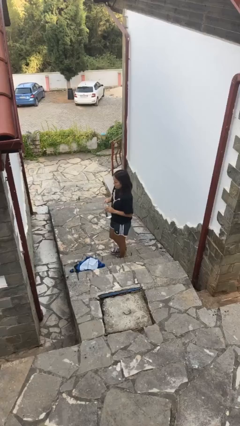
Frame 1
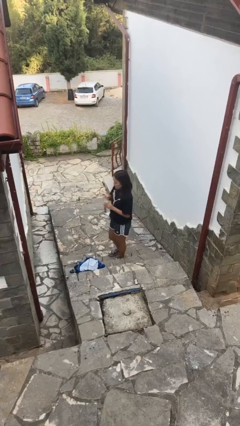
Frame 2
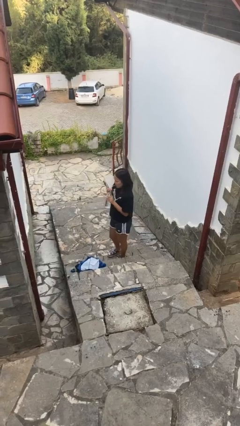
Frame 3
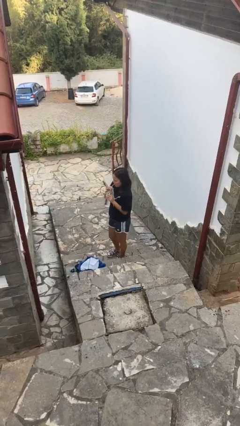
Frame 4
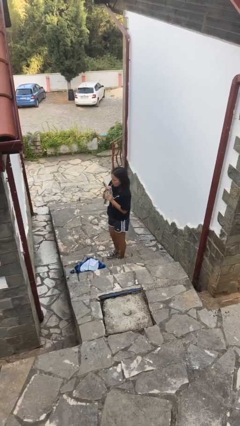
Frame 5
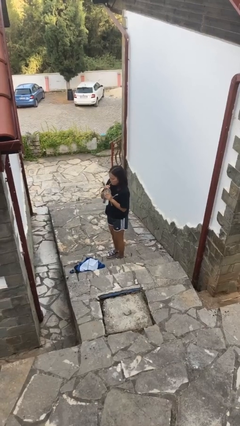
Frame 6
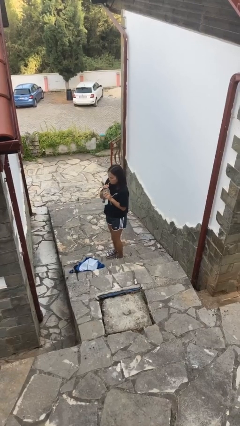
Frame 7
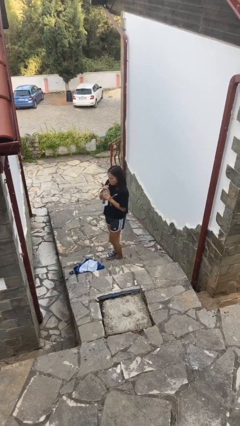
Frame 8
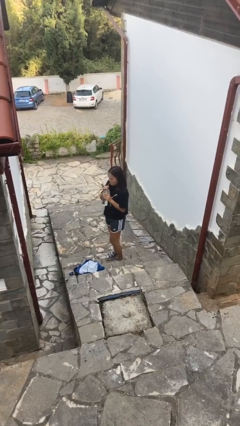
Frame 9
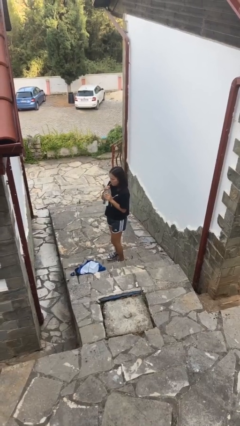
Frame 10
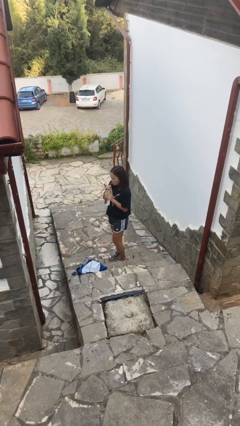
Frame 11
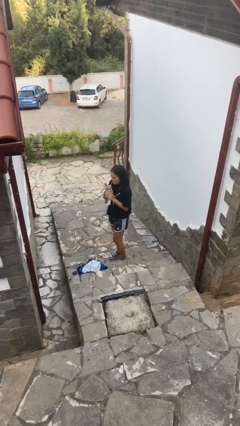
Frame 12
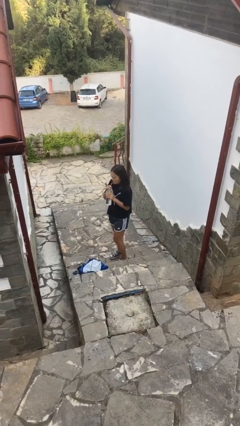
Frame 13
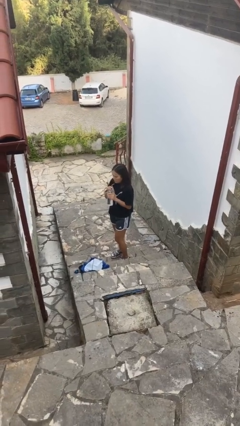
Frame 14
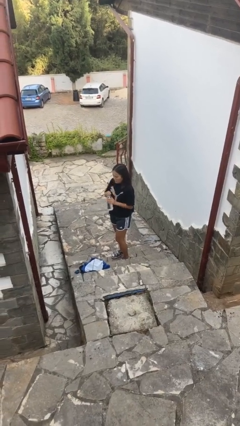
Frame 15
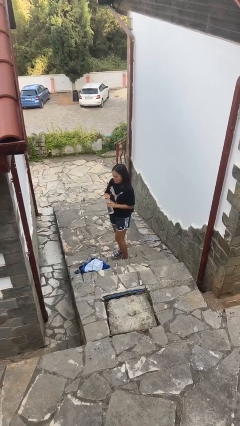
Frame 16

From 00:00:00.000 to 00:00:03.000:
person drinks from straw

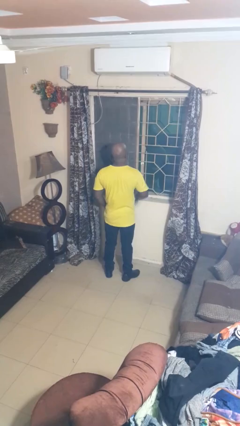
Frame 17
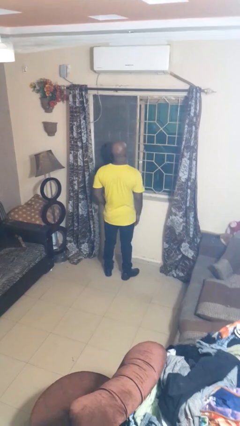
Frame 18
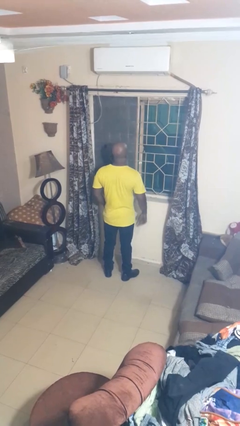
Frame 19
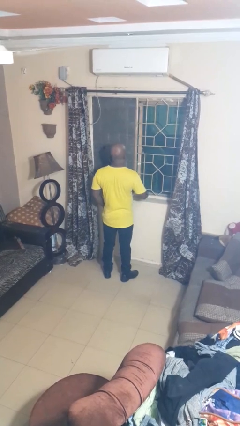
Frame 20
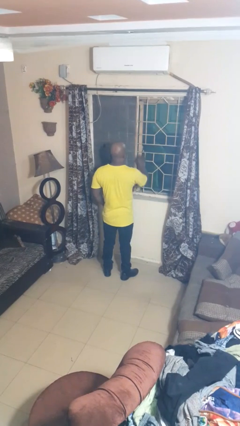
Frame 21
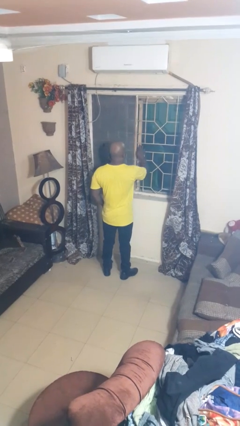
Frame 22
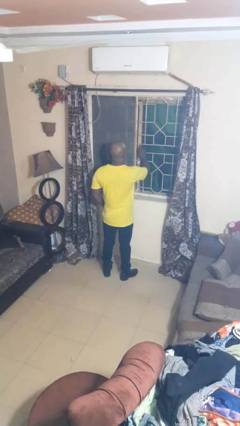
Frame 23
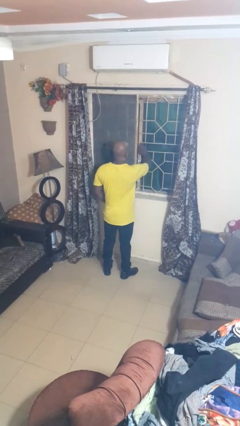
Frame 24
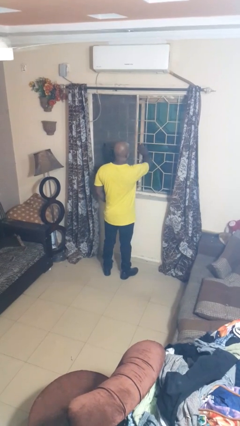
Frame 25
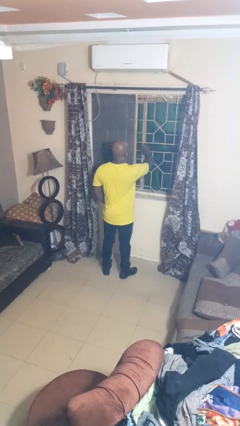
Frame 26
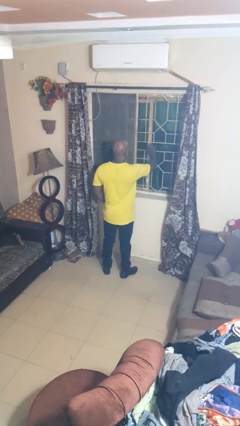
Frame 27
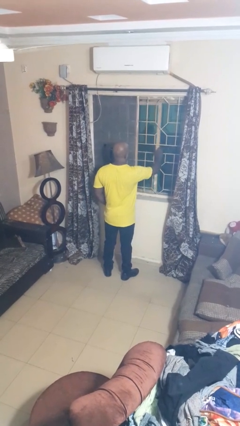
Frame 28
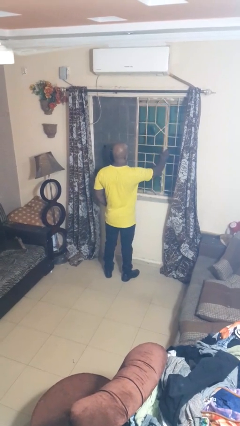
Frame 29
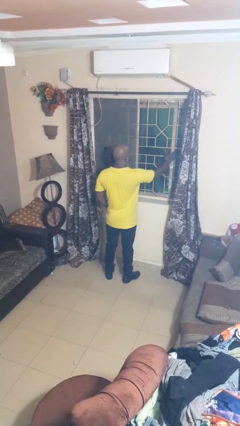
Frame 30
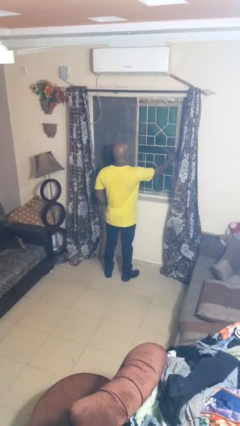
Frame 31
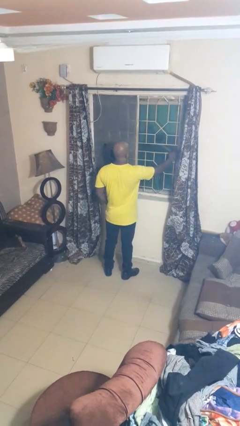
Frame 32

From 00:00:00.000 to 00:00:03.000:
person opens home window

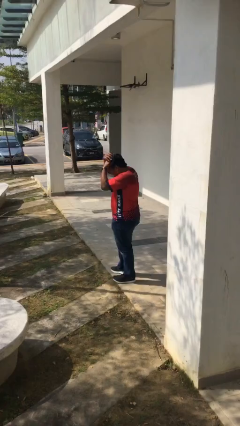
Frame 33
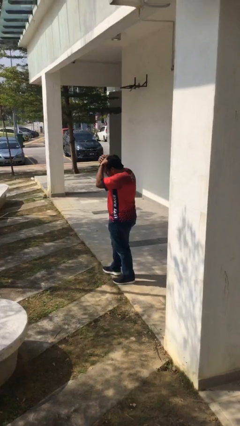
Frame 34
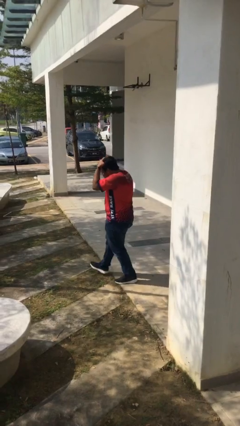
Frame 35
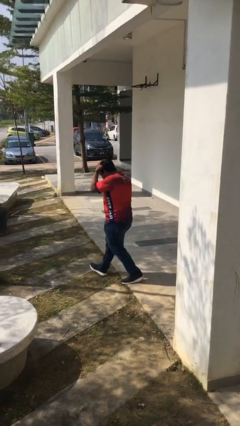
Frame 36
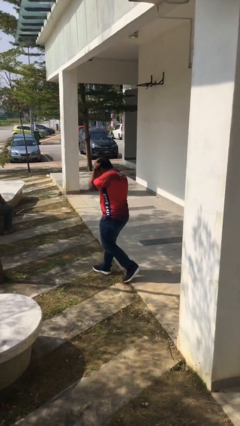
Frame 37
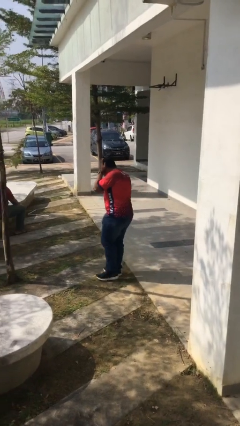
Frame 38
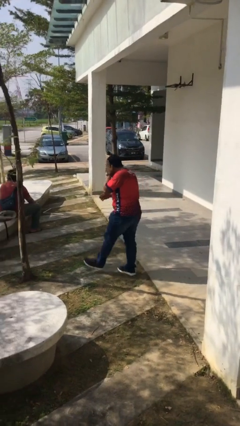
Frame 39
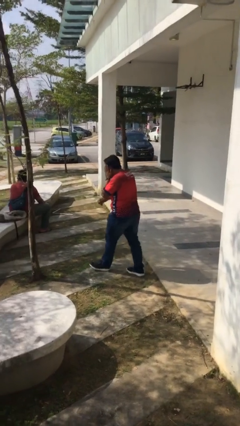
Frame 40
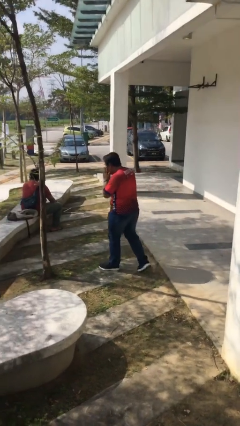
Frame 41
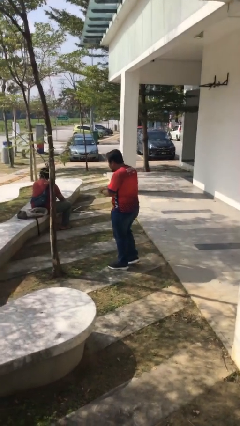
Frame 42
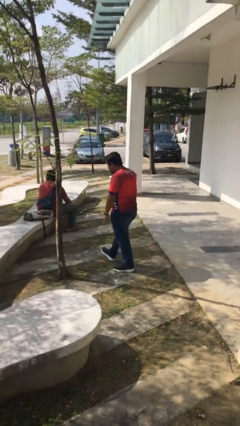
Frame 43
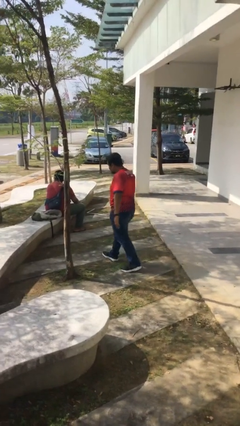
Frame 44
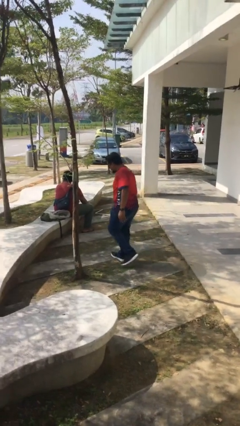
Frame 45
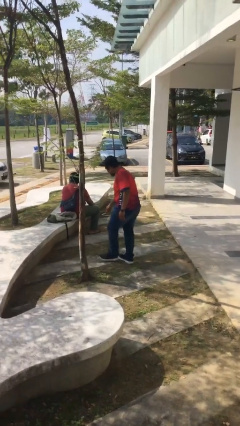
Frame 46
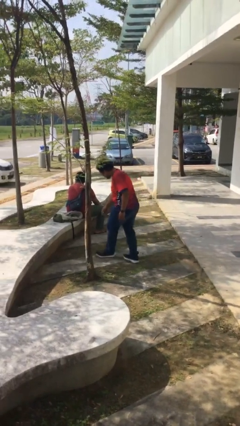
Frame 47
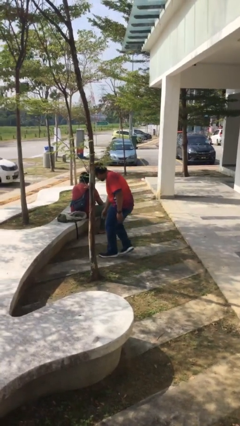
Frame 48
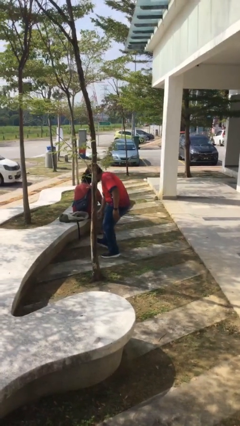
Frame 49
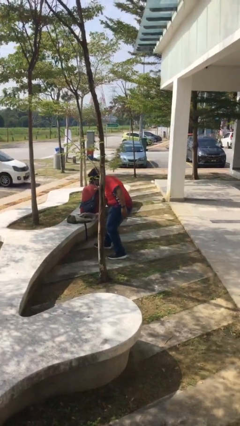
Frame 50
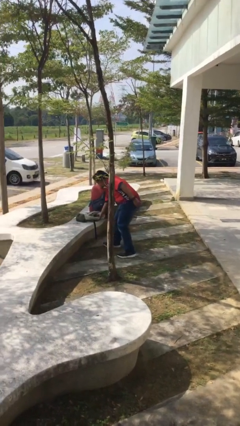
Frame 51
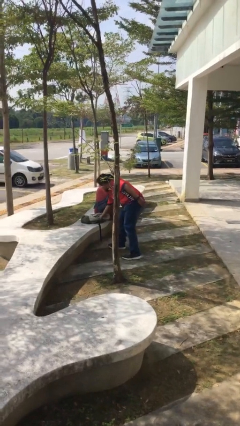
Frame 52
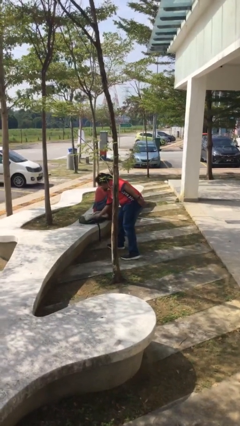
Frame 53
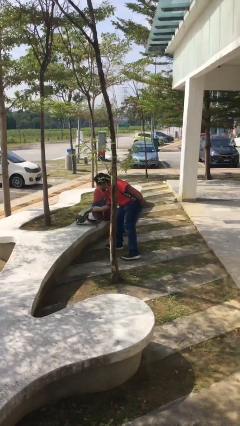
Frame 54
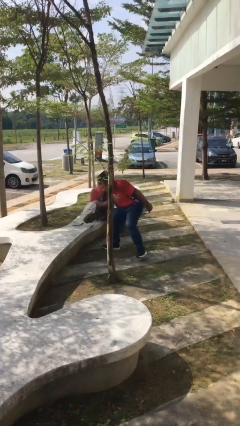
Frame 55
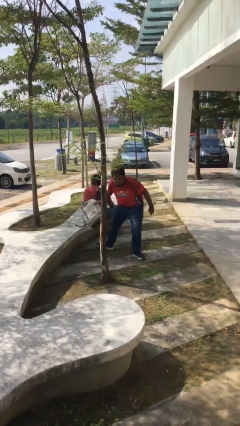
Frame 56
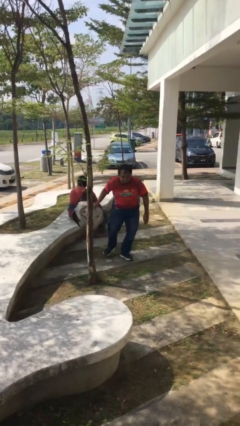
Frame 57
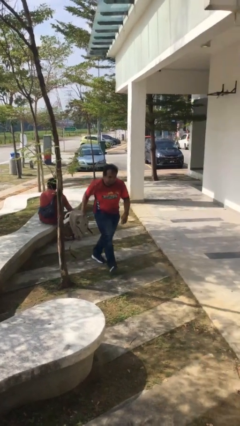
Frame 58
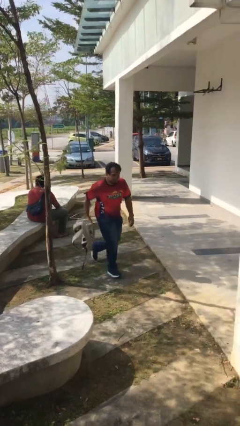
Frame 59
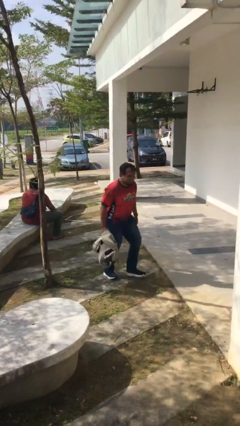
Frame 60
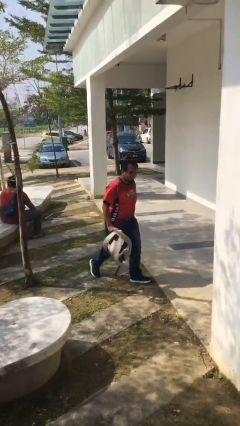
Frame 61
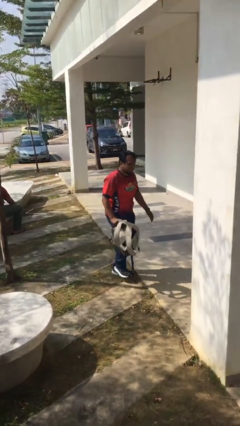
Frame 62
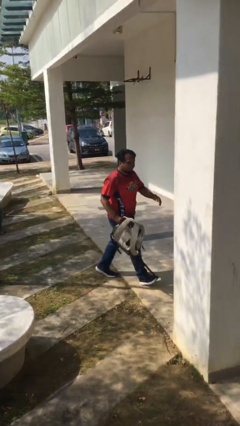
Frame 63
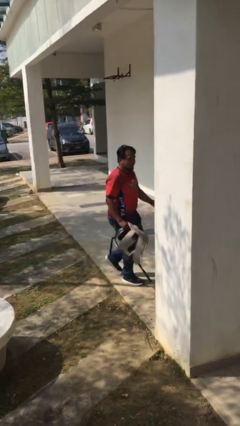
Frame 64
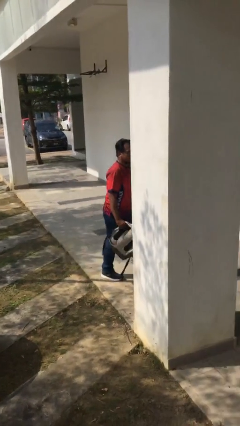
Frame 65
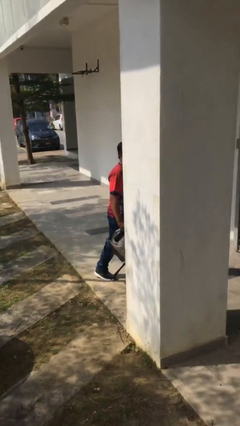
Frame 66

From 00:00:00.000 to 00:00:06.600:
person steals object from person

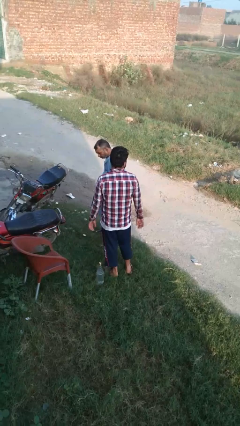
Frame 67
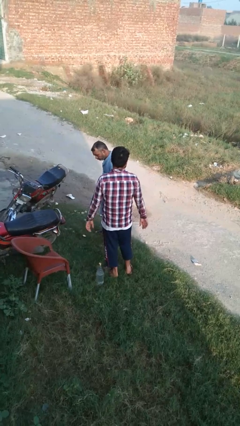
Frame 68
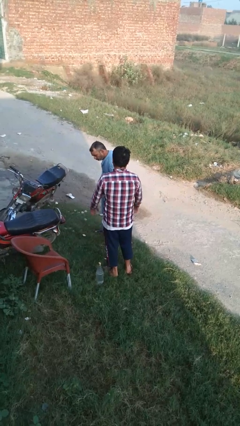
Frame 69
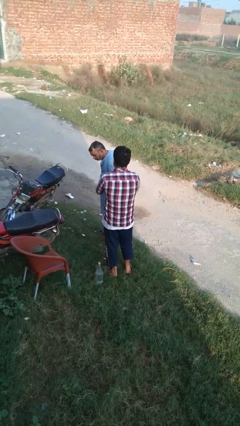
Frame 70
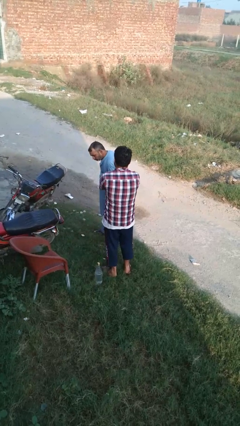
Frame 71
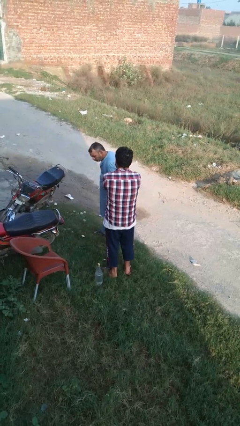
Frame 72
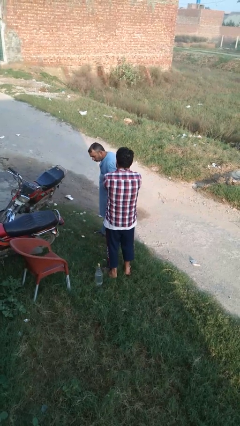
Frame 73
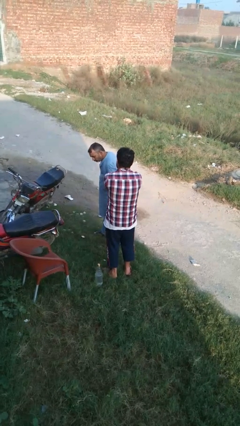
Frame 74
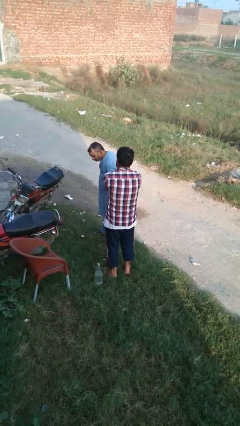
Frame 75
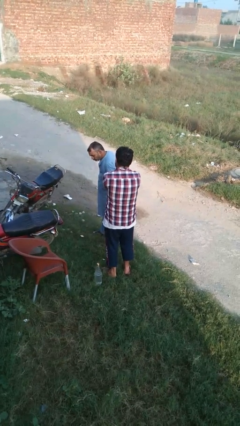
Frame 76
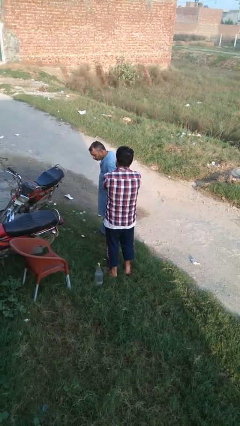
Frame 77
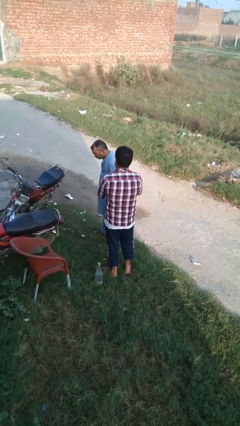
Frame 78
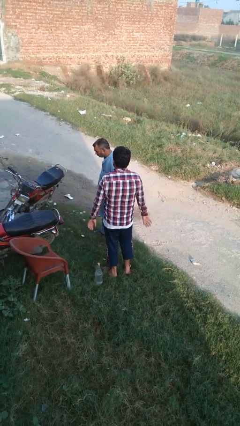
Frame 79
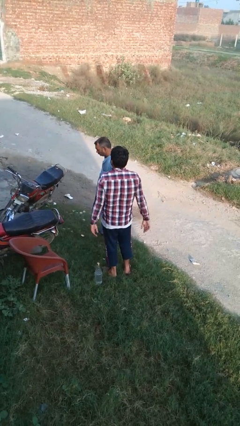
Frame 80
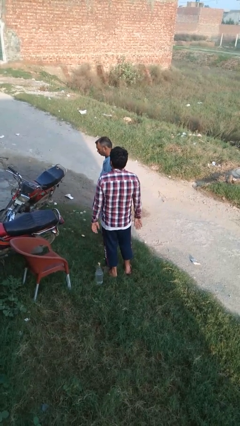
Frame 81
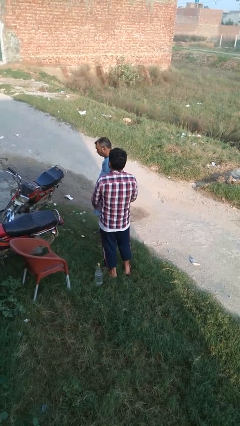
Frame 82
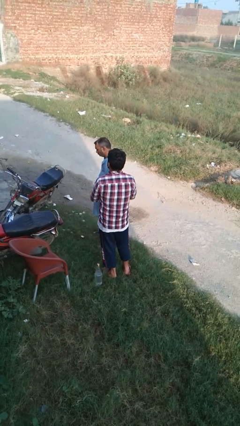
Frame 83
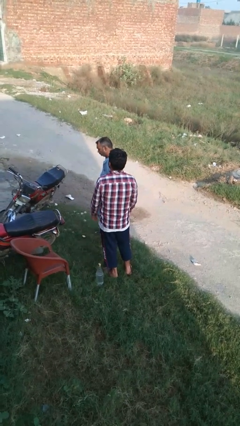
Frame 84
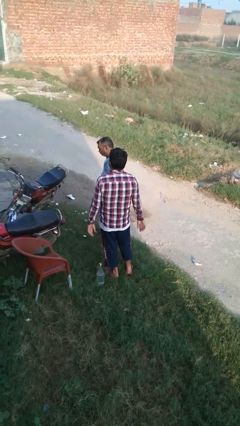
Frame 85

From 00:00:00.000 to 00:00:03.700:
person grabs person by forearm

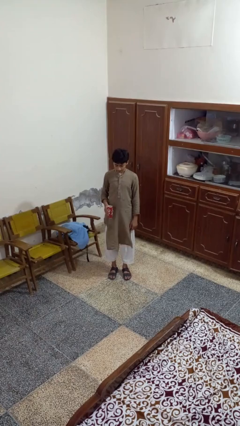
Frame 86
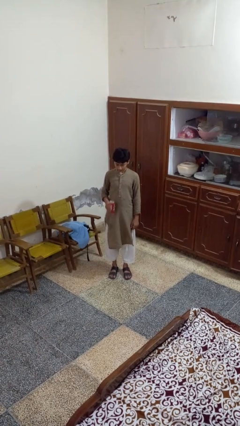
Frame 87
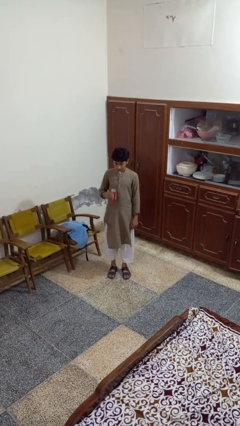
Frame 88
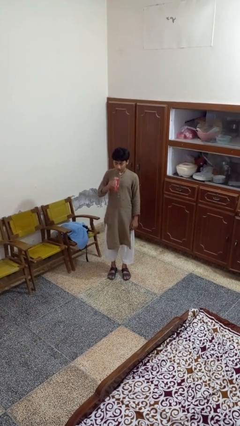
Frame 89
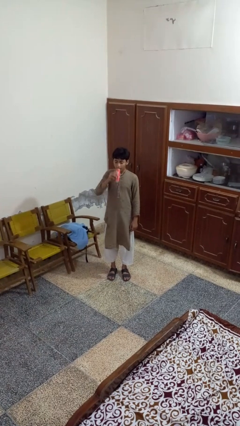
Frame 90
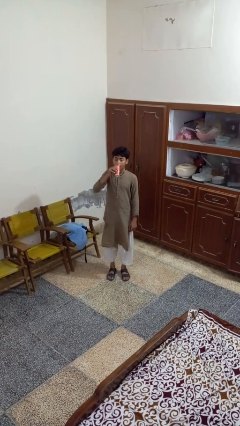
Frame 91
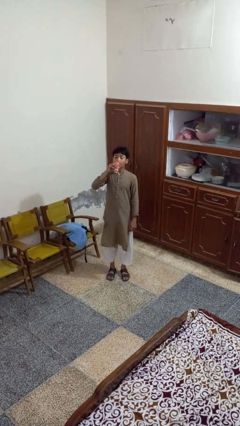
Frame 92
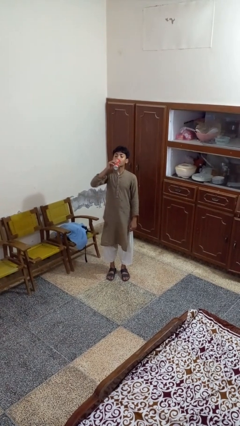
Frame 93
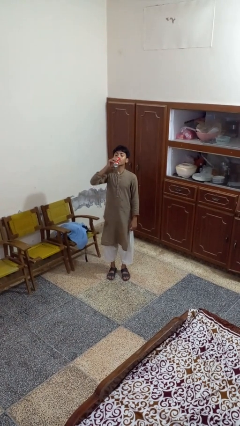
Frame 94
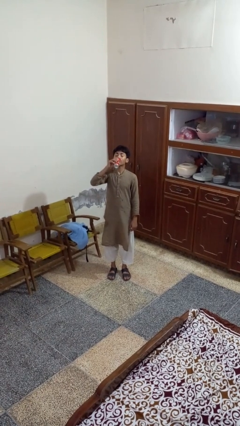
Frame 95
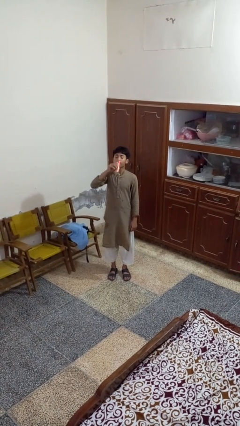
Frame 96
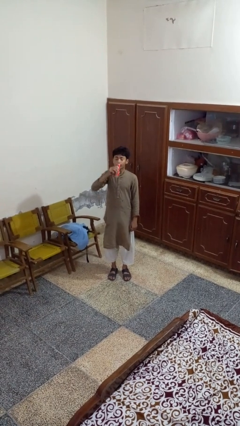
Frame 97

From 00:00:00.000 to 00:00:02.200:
person drinks from beverage can
